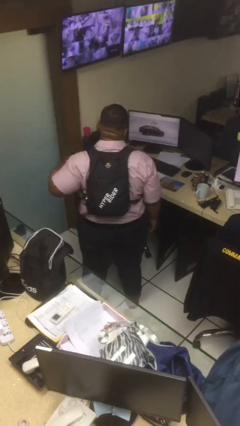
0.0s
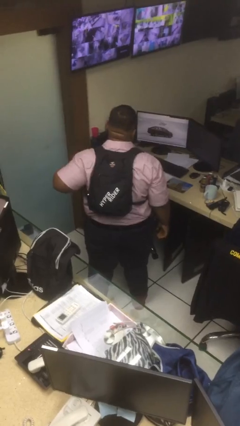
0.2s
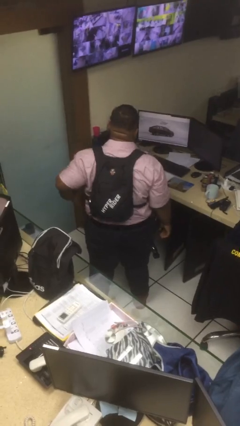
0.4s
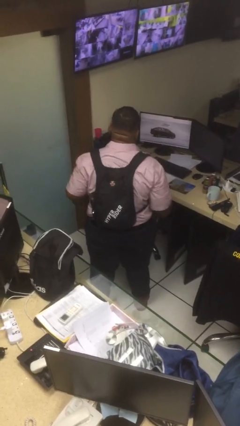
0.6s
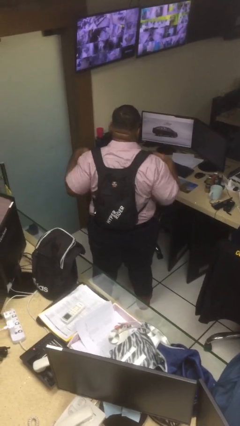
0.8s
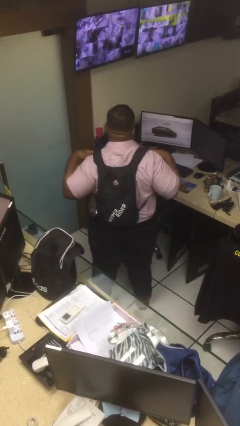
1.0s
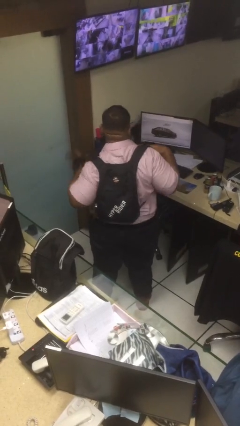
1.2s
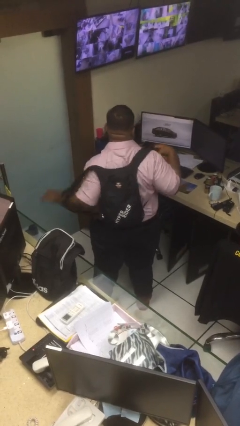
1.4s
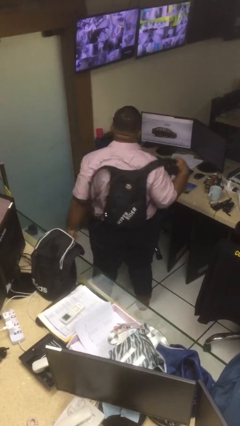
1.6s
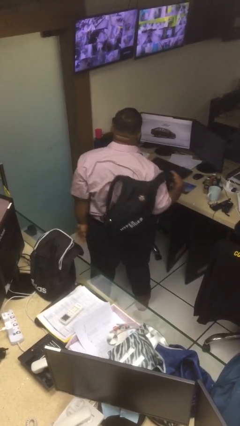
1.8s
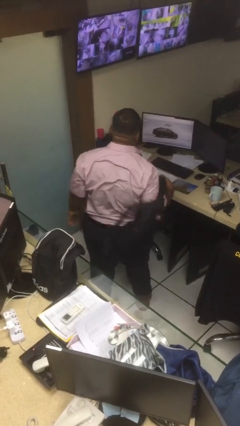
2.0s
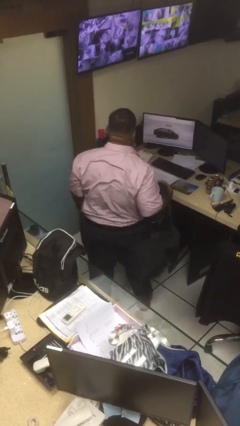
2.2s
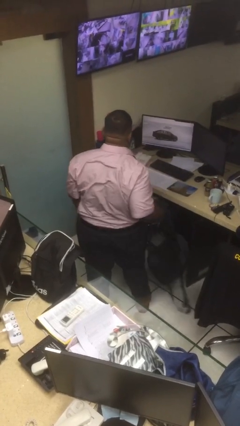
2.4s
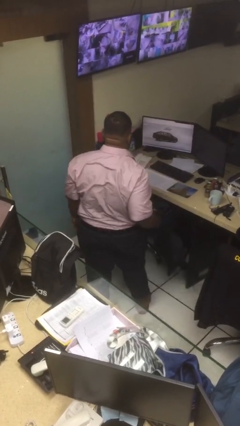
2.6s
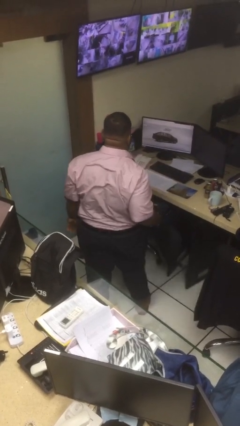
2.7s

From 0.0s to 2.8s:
person takes off backpack

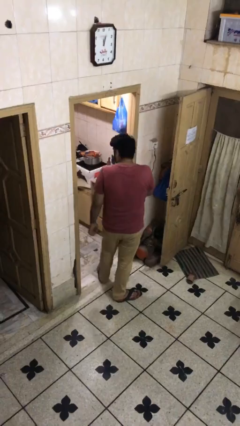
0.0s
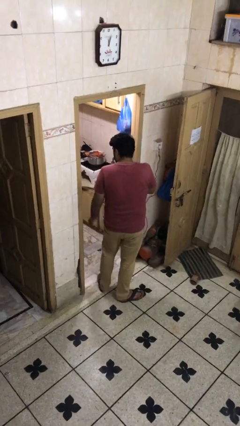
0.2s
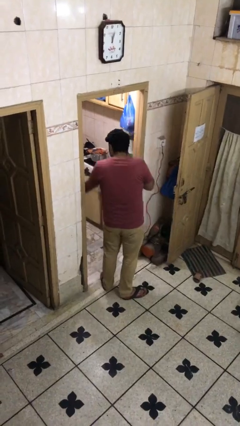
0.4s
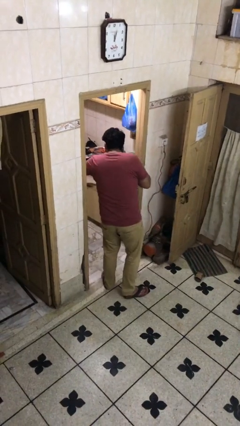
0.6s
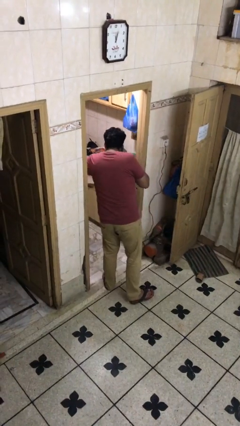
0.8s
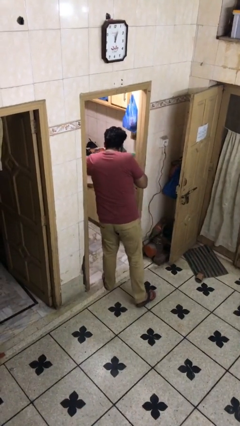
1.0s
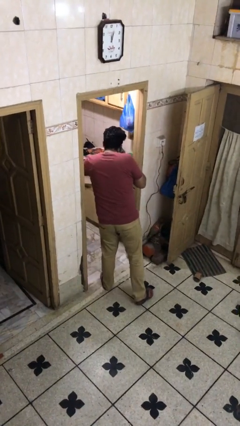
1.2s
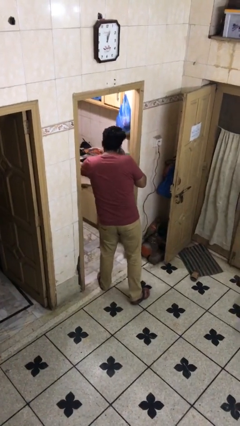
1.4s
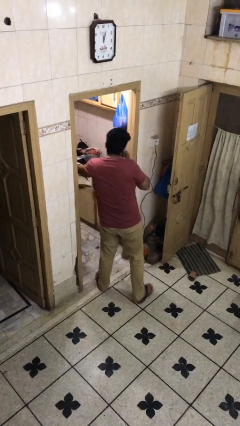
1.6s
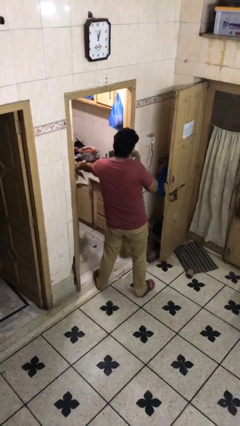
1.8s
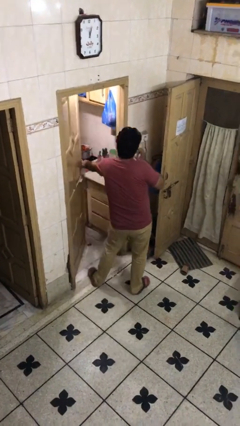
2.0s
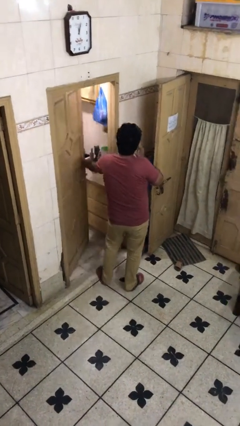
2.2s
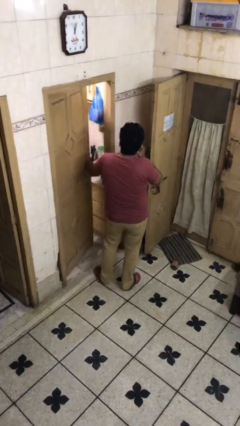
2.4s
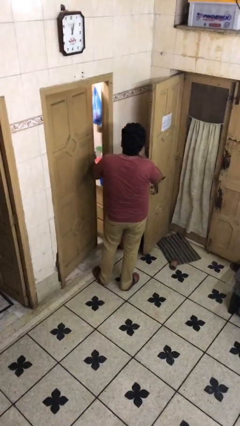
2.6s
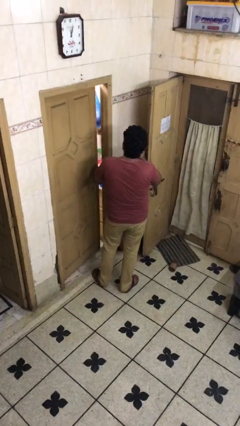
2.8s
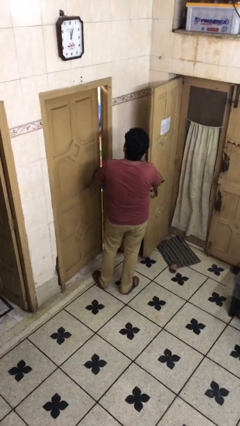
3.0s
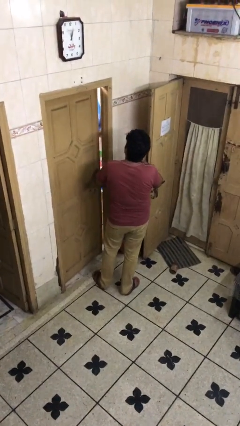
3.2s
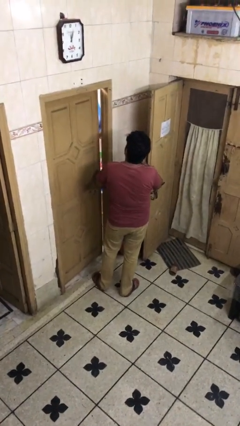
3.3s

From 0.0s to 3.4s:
person closes facility door

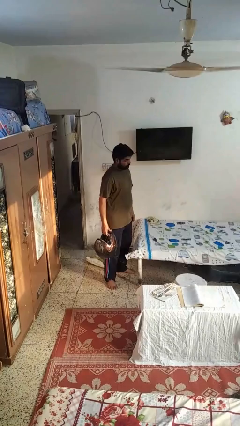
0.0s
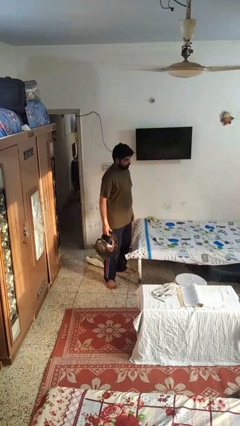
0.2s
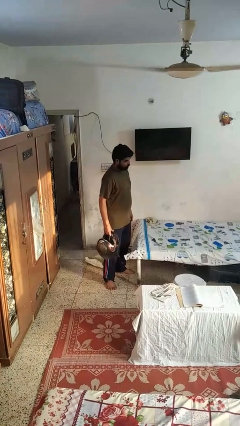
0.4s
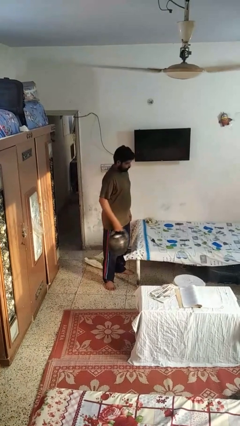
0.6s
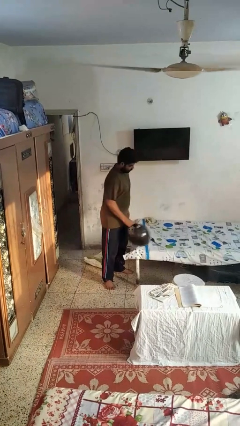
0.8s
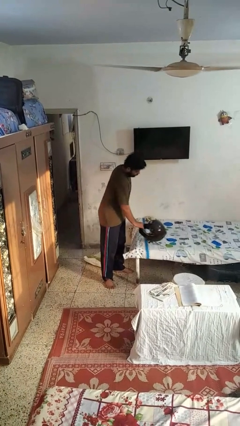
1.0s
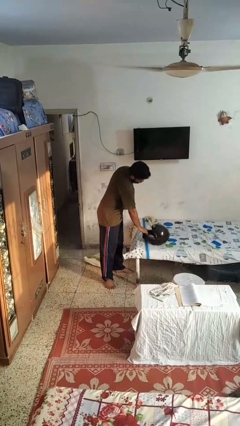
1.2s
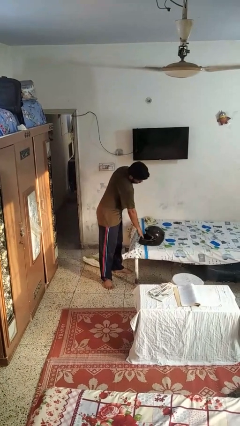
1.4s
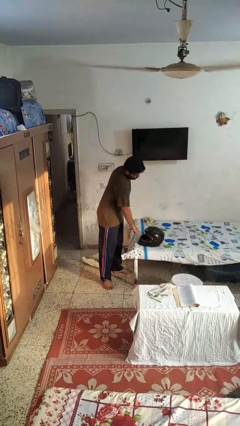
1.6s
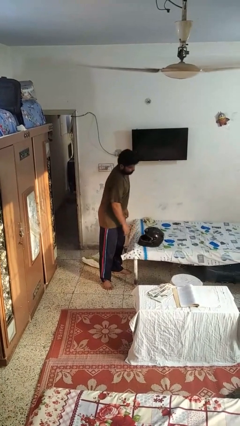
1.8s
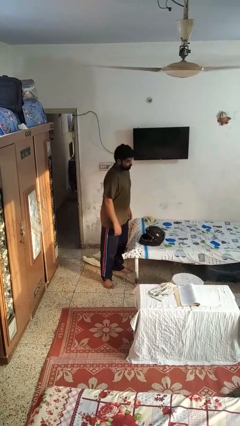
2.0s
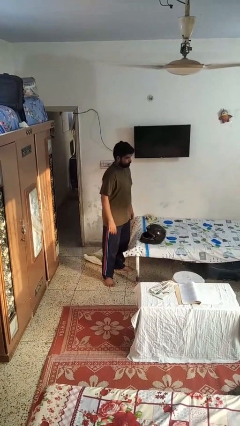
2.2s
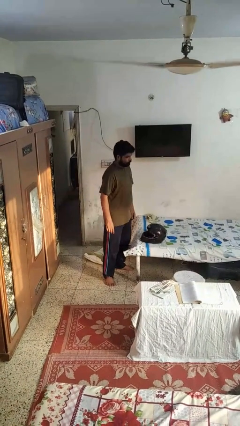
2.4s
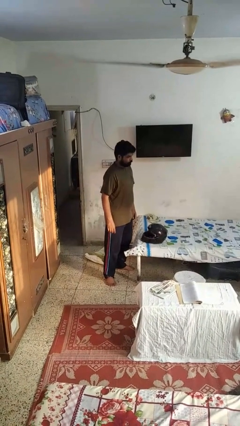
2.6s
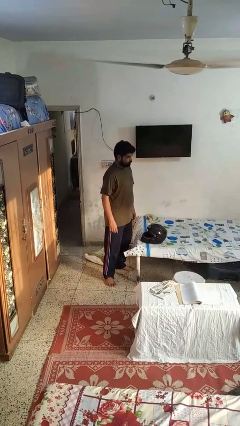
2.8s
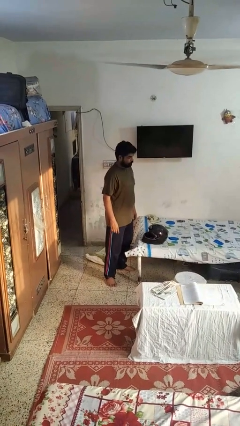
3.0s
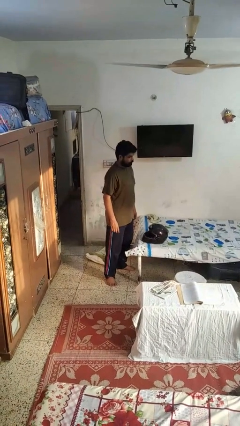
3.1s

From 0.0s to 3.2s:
person puts down object on bed

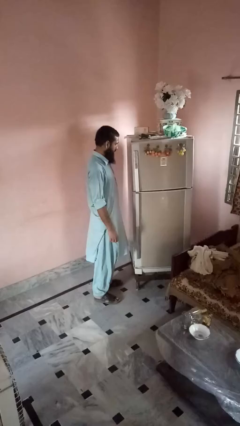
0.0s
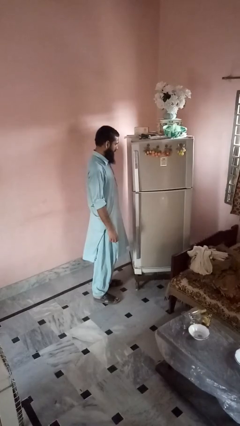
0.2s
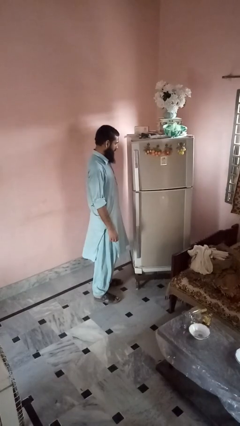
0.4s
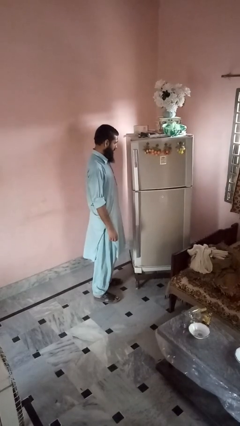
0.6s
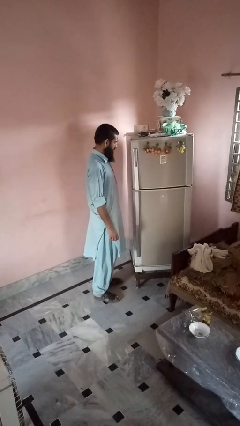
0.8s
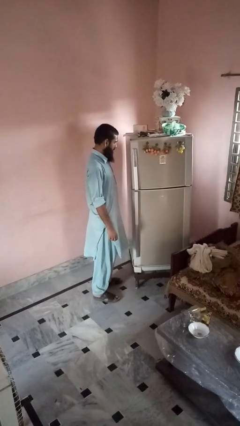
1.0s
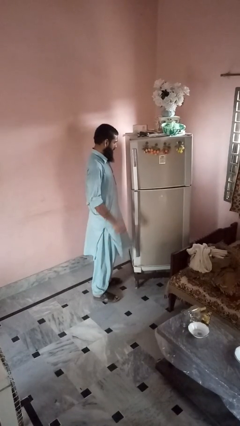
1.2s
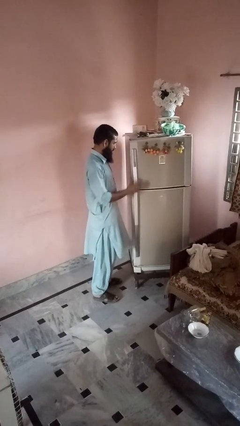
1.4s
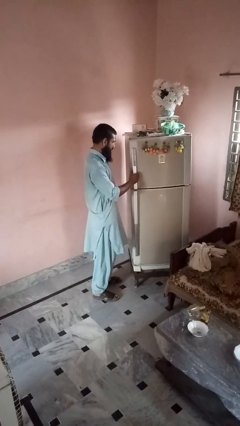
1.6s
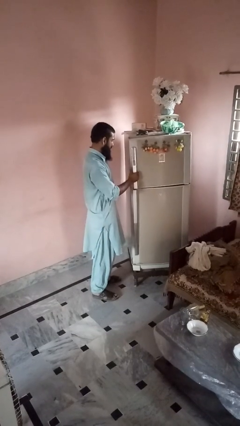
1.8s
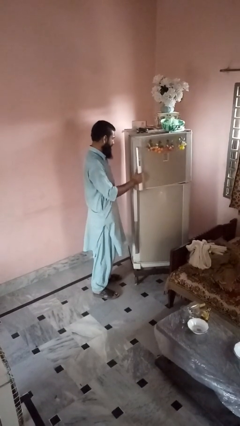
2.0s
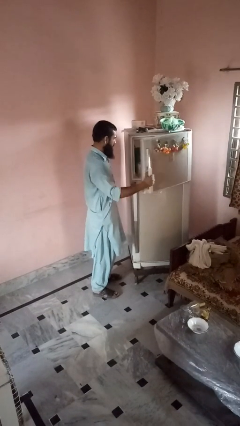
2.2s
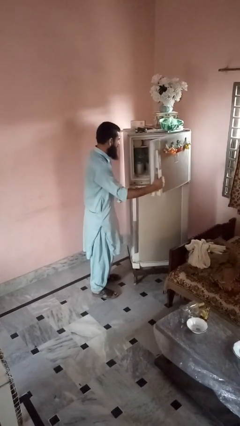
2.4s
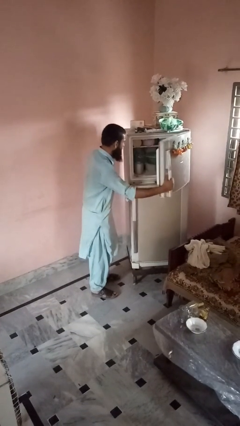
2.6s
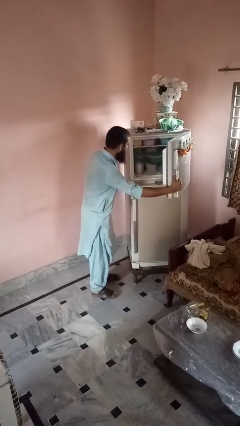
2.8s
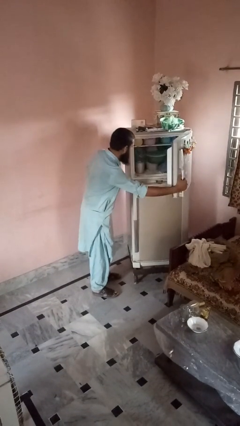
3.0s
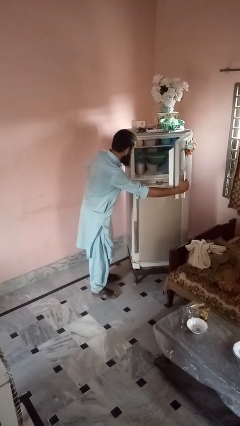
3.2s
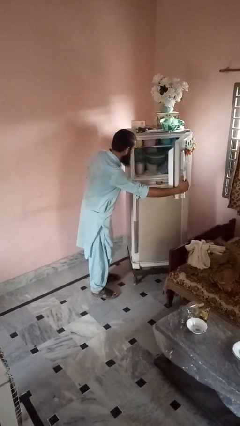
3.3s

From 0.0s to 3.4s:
person opens refrigerator

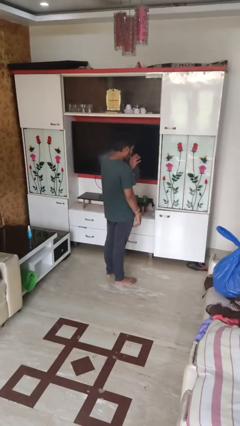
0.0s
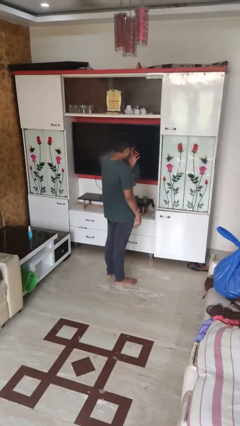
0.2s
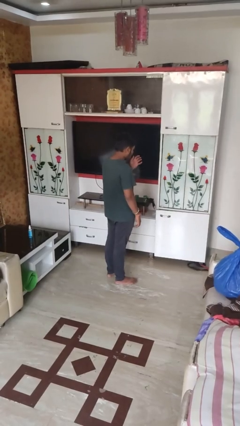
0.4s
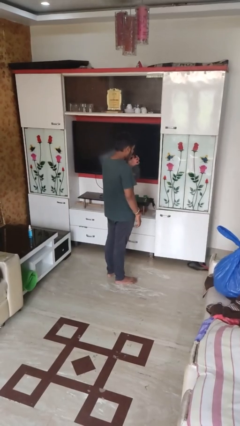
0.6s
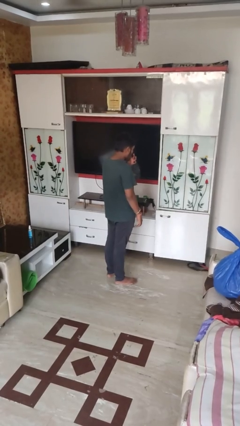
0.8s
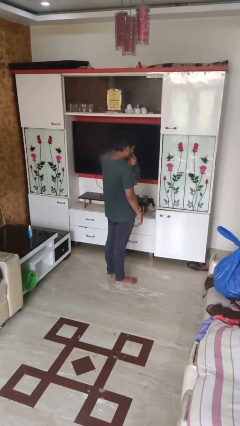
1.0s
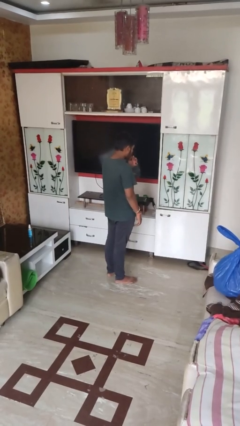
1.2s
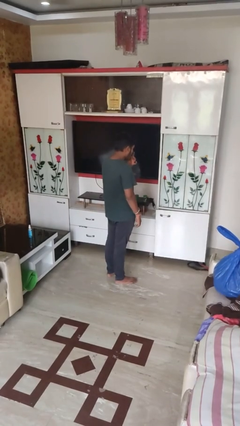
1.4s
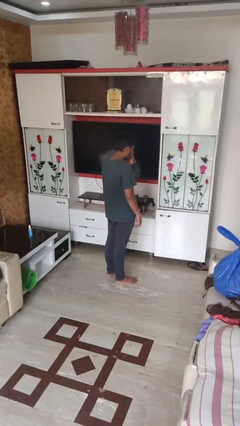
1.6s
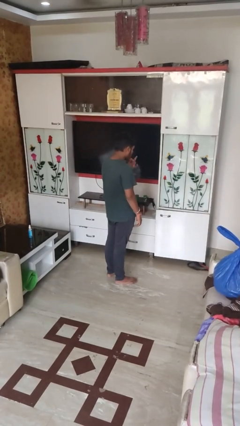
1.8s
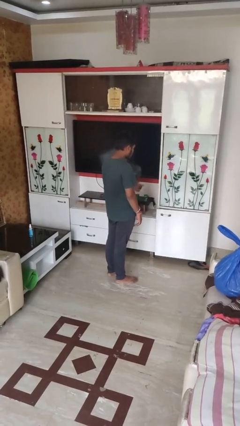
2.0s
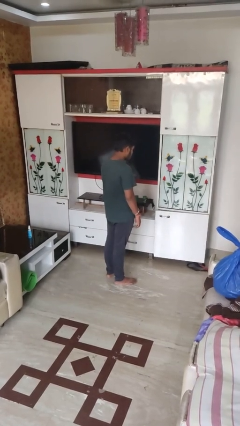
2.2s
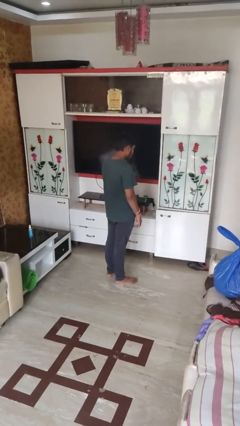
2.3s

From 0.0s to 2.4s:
person licks fingers

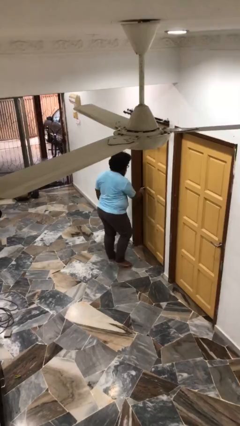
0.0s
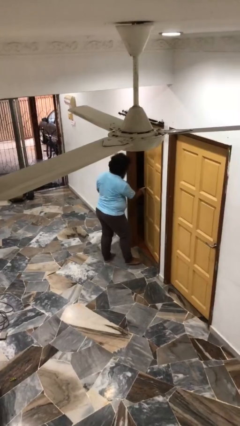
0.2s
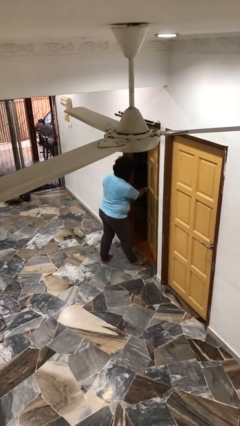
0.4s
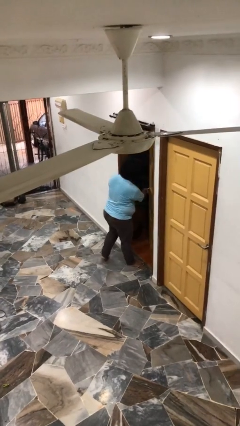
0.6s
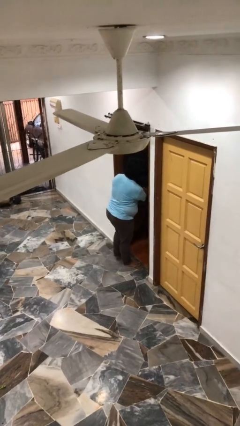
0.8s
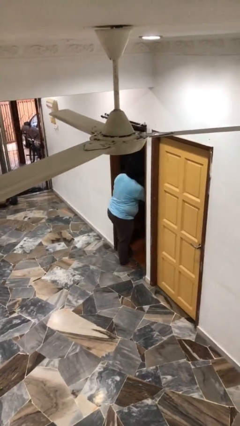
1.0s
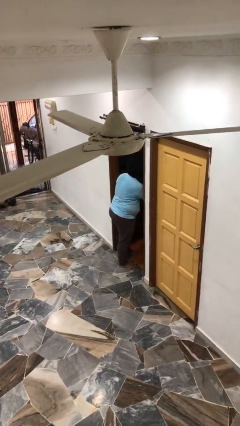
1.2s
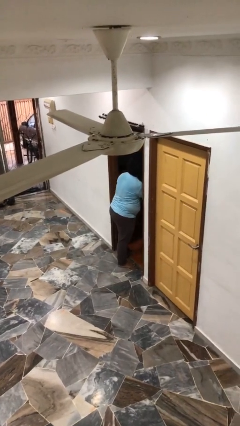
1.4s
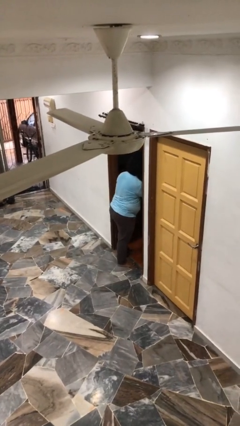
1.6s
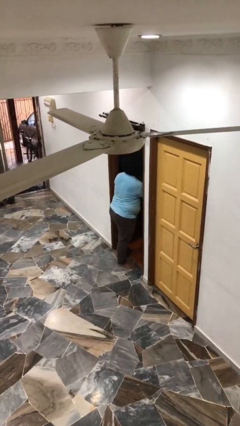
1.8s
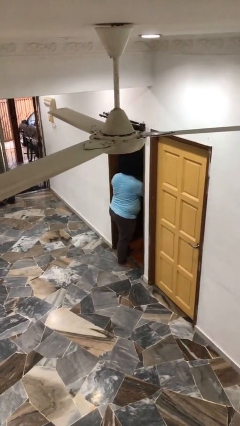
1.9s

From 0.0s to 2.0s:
person opens facility door

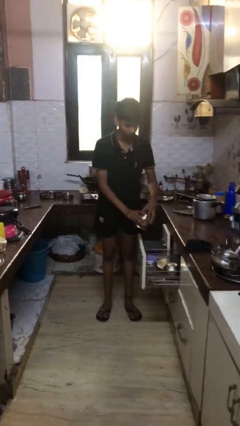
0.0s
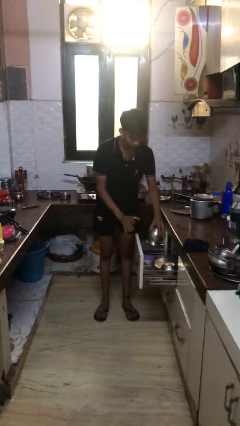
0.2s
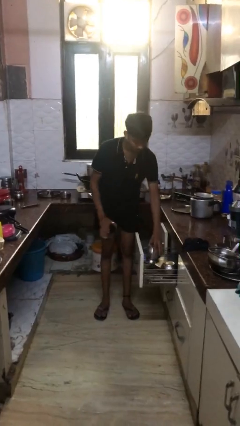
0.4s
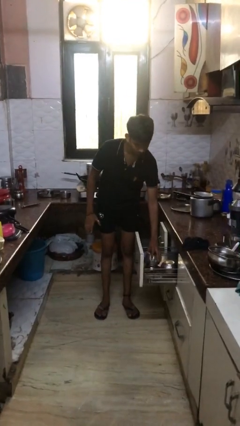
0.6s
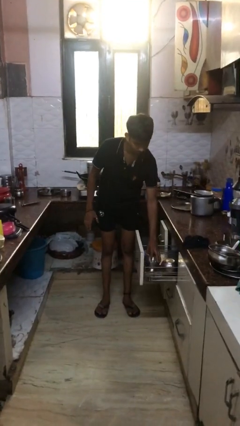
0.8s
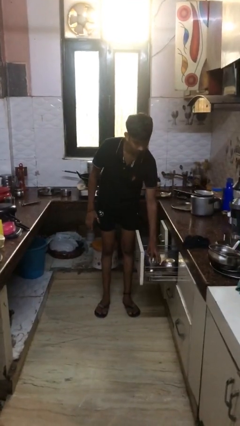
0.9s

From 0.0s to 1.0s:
person puts object into kitchen drawer
